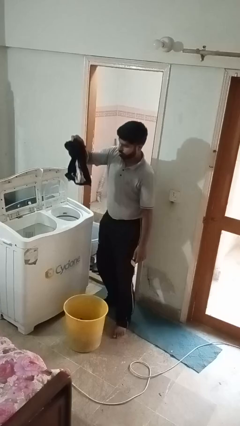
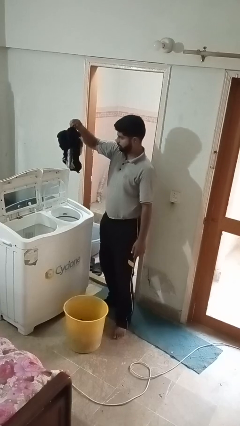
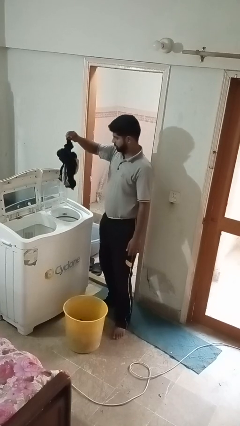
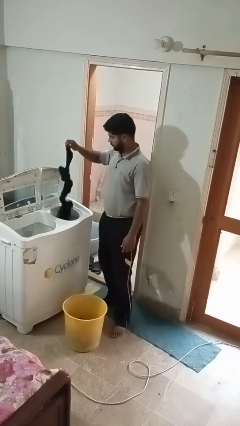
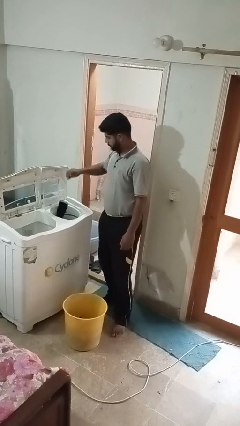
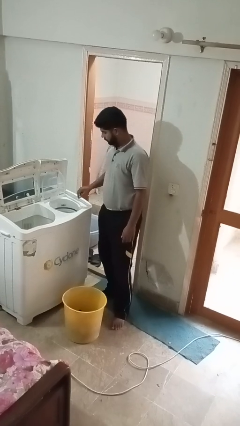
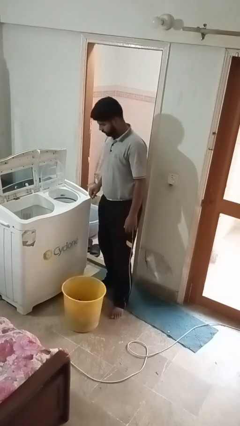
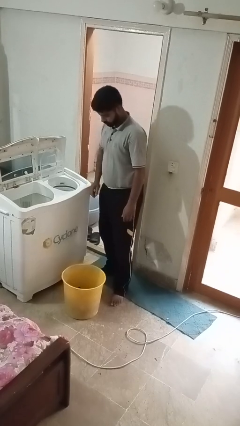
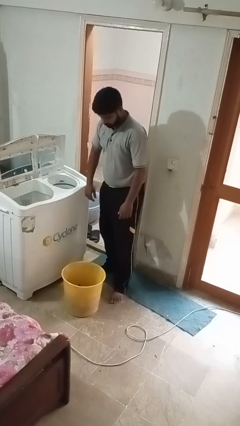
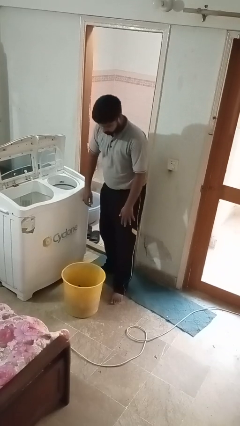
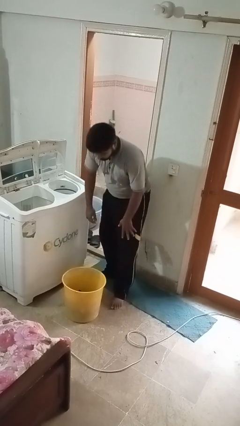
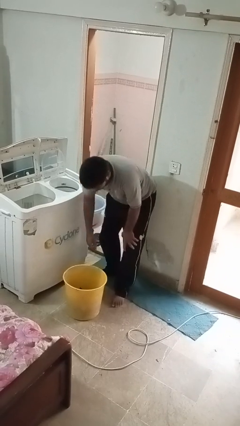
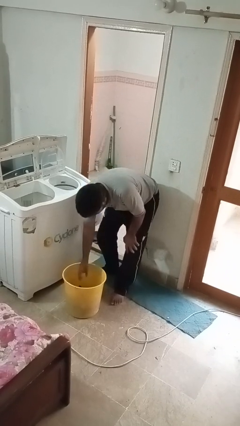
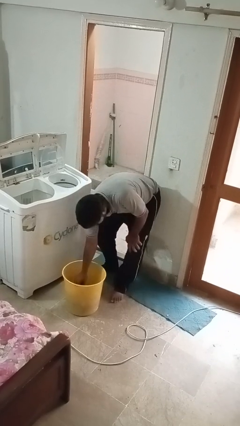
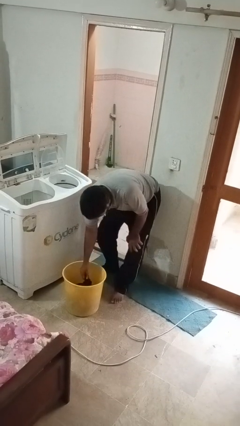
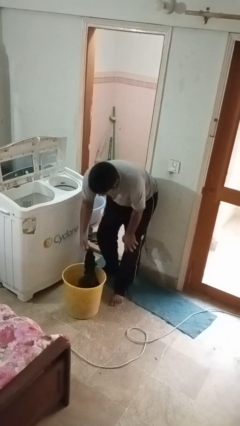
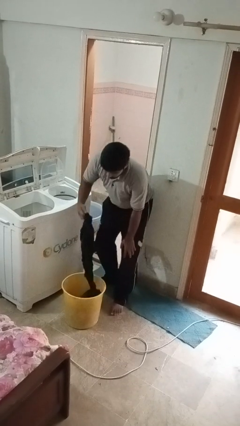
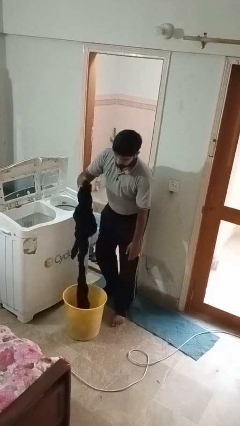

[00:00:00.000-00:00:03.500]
person loads dryer

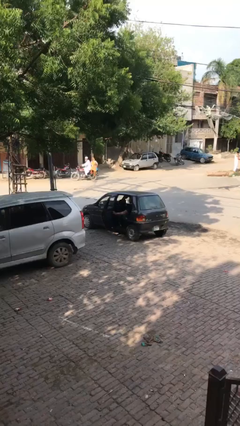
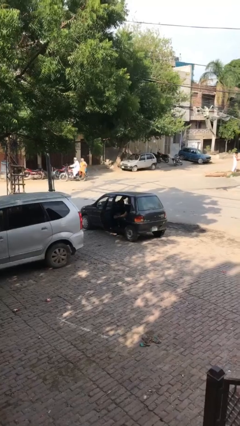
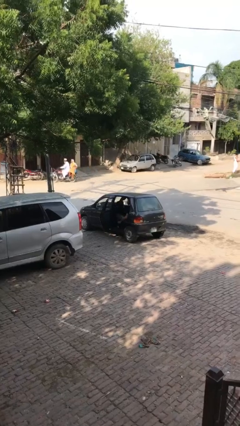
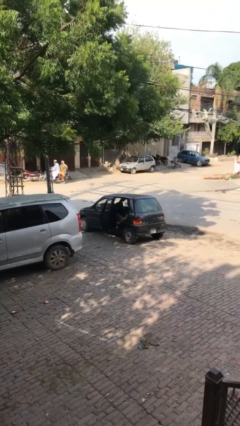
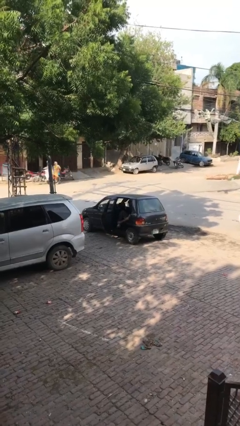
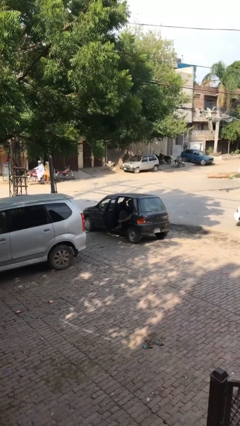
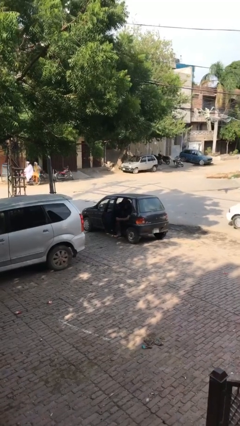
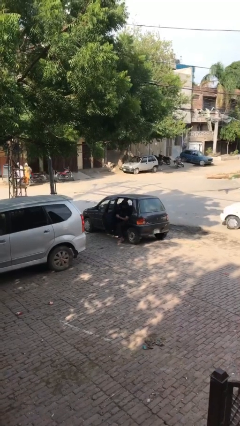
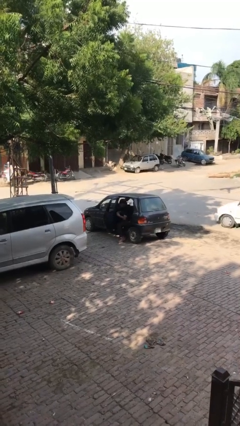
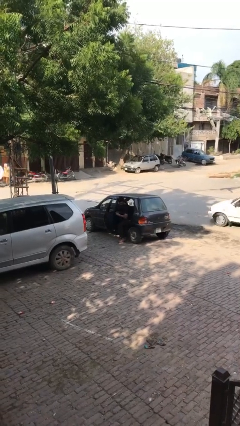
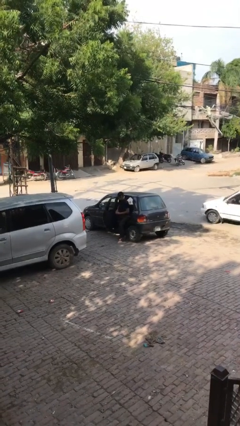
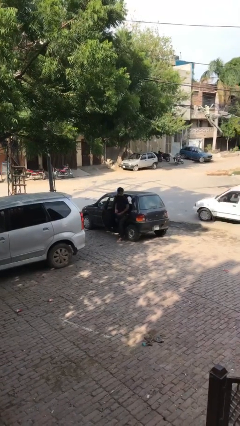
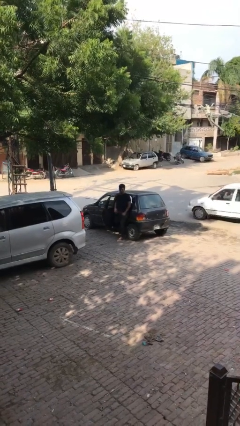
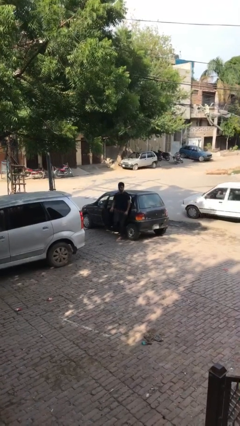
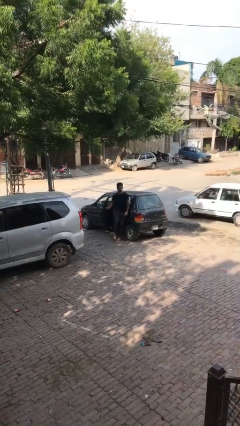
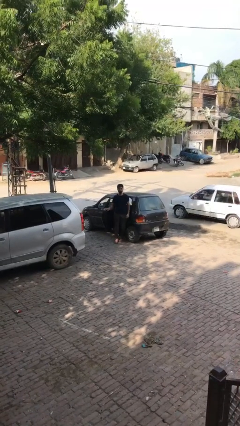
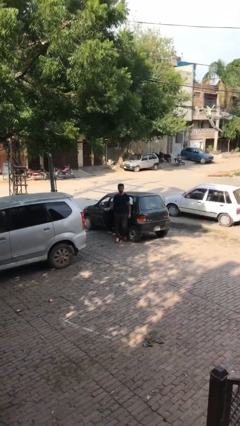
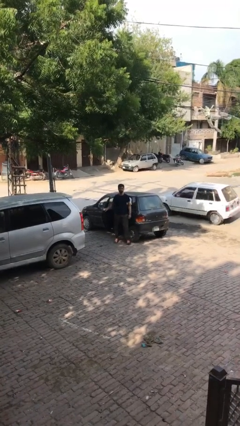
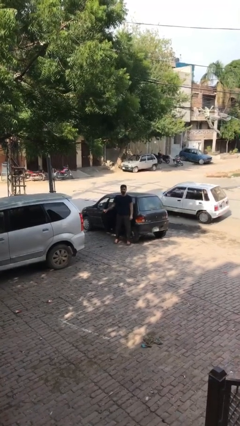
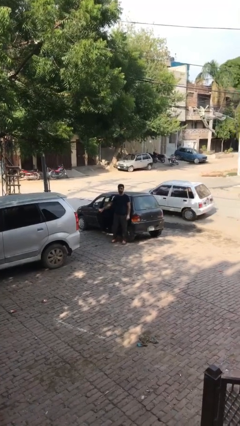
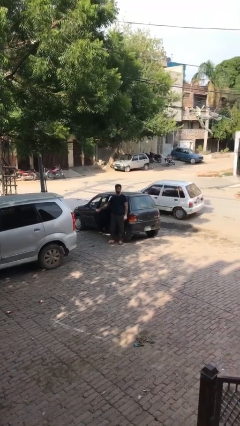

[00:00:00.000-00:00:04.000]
person exits car

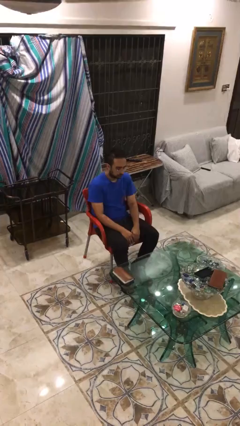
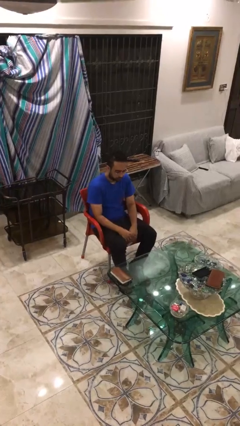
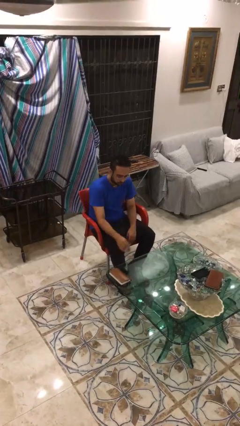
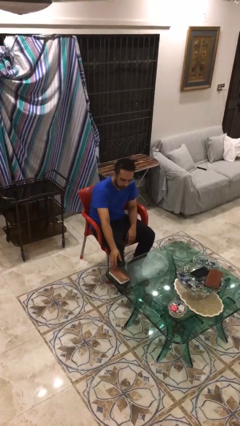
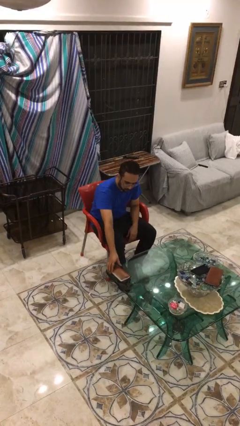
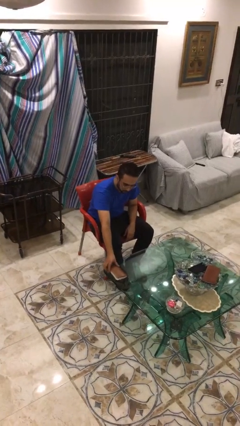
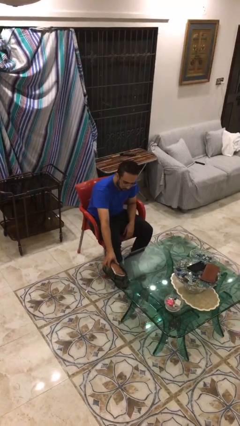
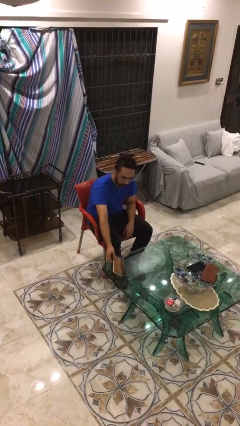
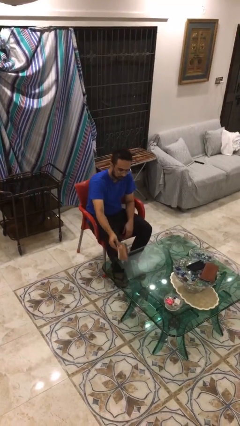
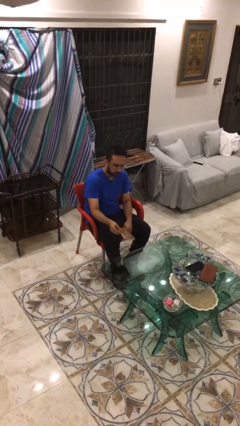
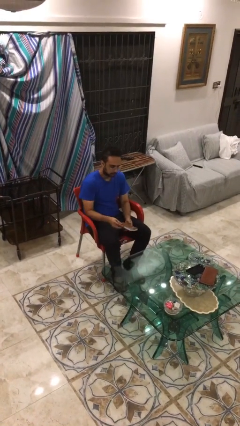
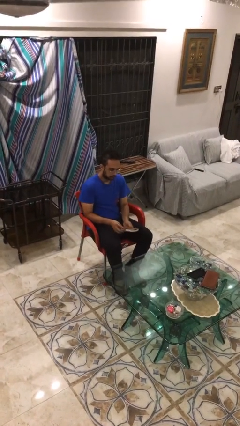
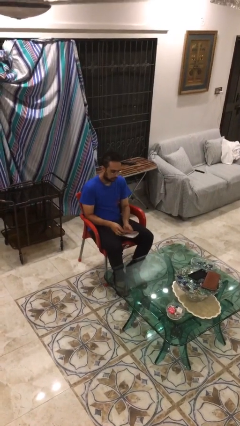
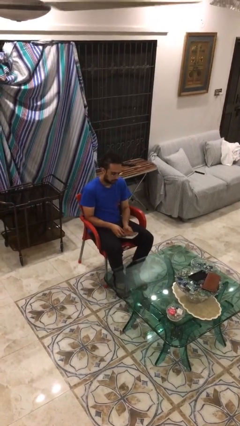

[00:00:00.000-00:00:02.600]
person picks up object from table

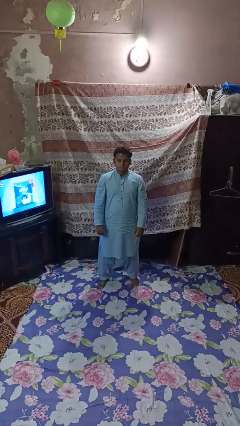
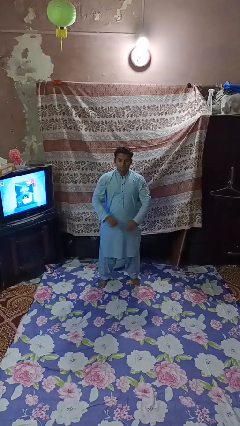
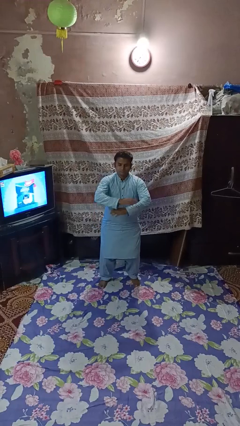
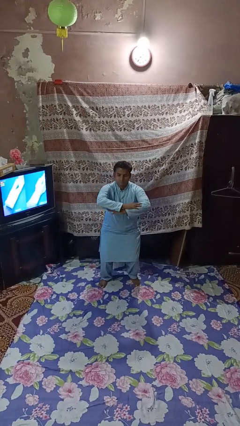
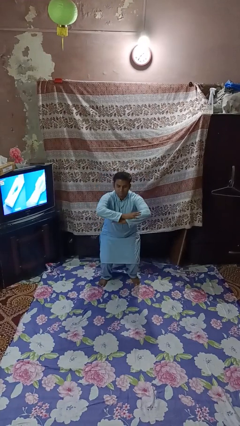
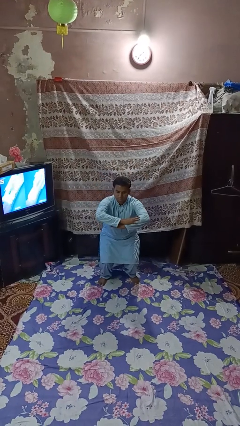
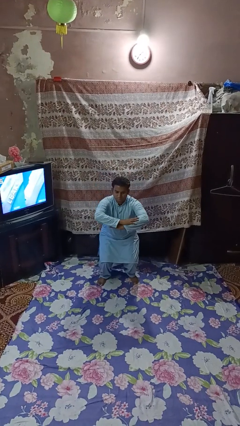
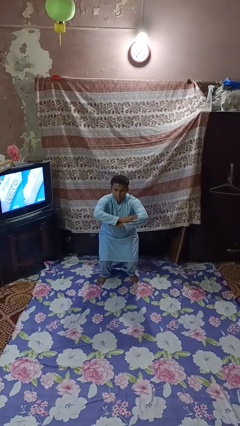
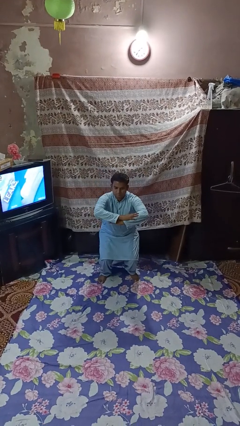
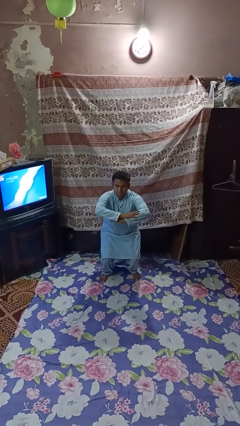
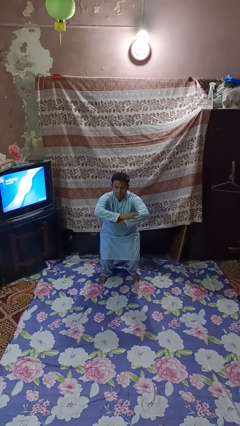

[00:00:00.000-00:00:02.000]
person squats

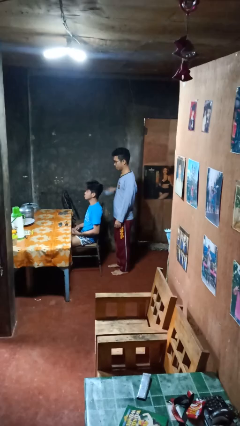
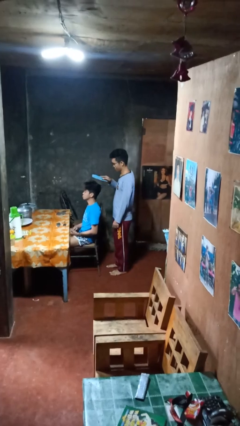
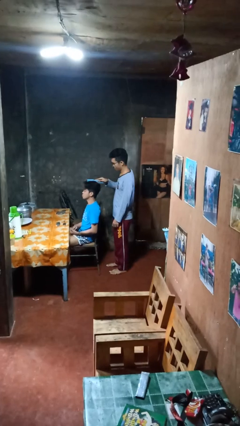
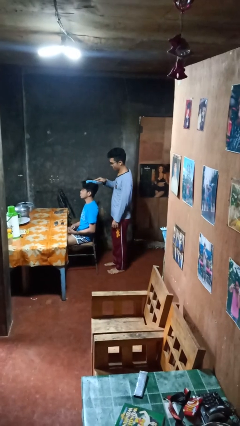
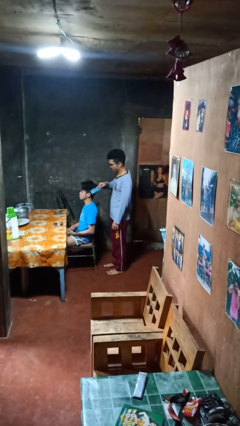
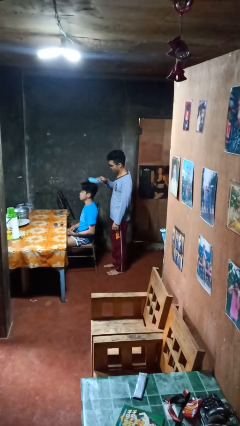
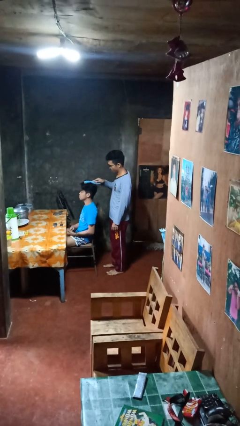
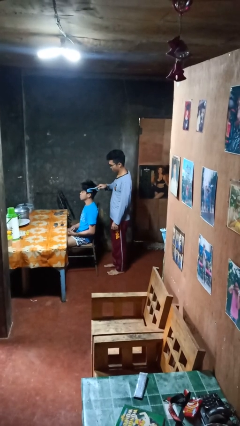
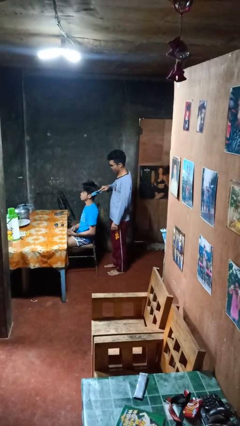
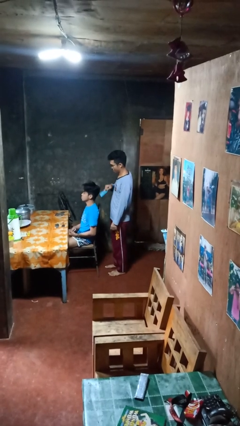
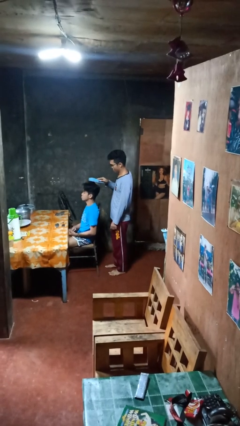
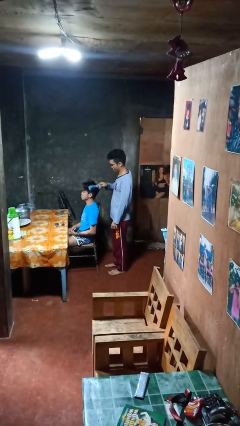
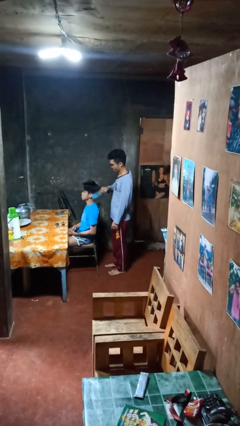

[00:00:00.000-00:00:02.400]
person brushes hair of person

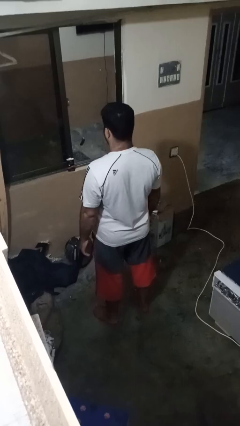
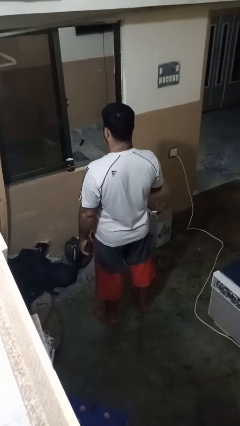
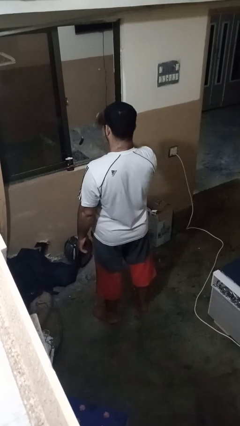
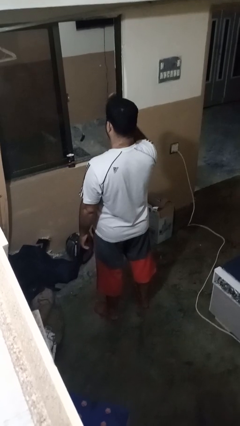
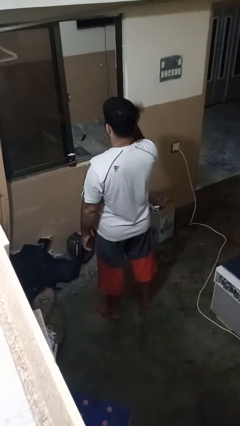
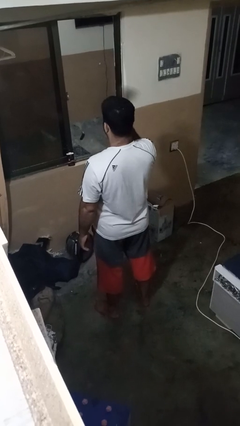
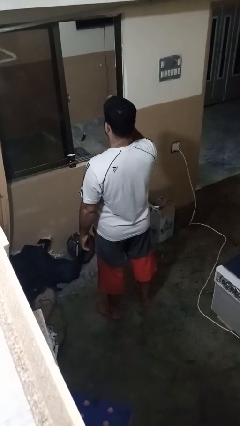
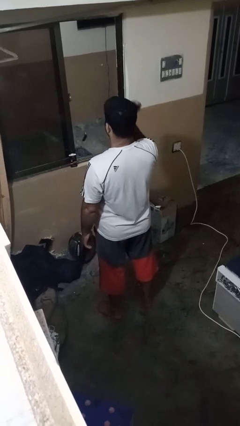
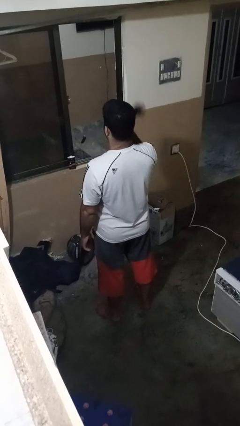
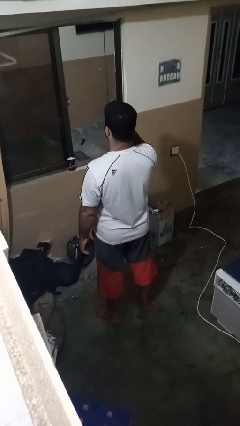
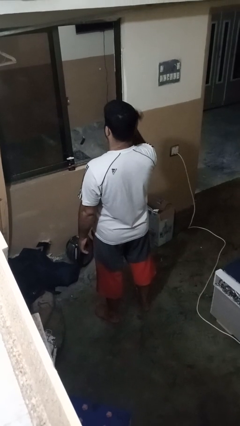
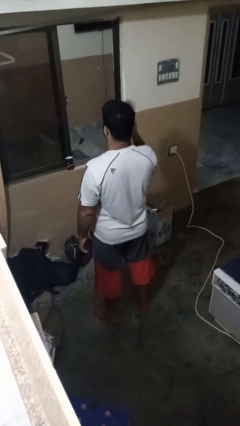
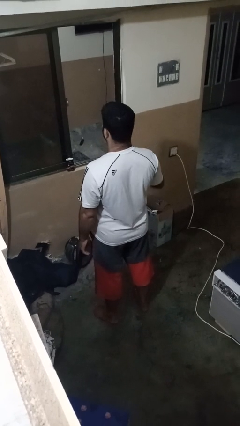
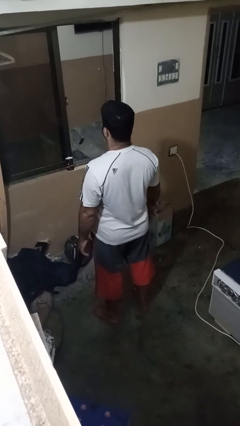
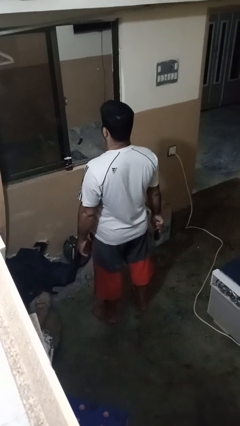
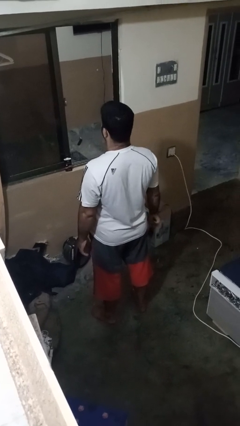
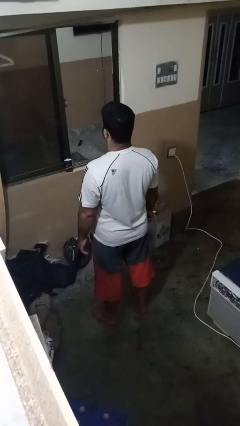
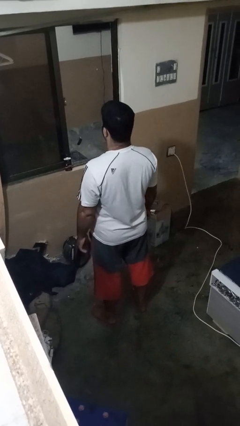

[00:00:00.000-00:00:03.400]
person brushes hair
